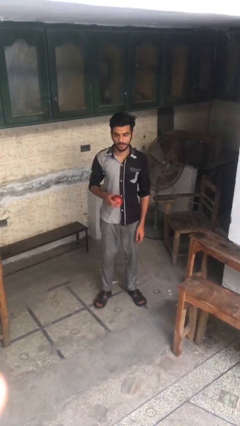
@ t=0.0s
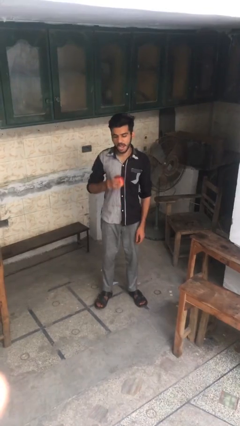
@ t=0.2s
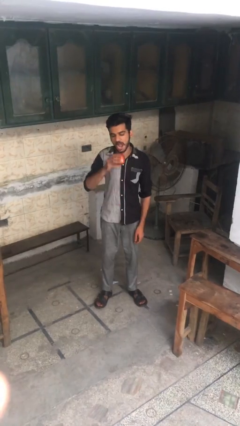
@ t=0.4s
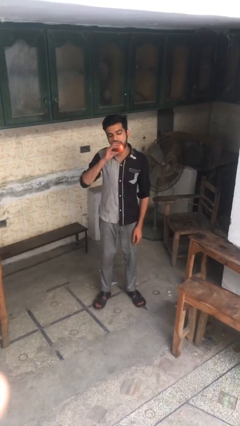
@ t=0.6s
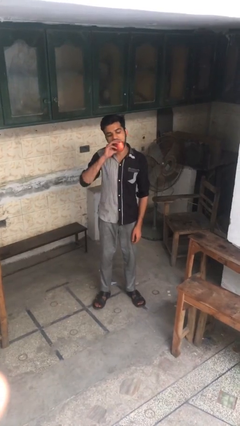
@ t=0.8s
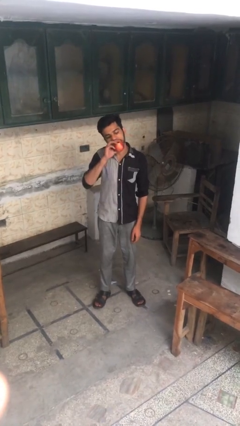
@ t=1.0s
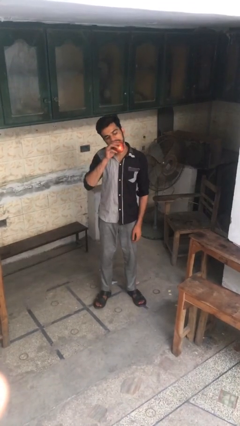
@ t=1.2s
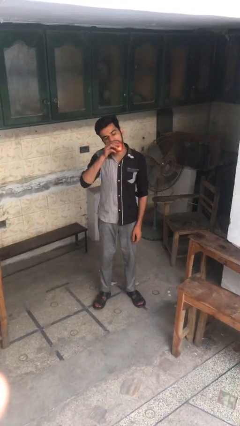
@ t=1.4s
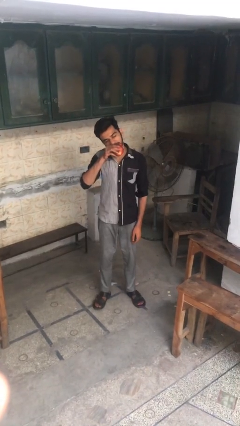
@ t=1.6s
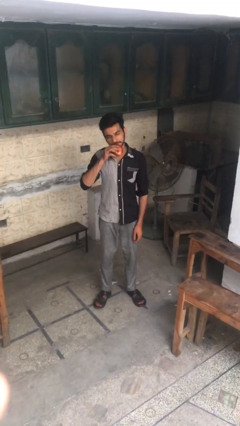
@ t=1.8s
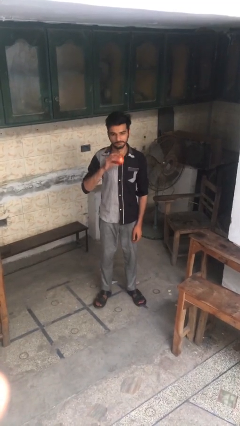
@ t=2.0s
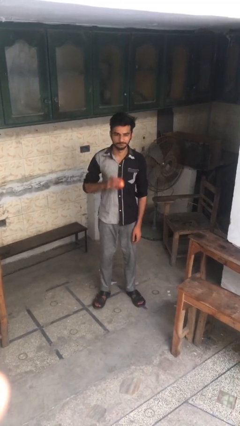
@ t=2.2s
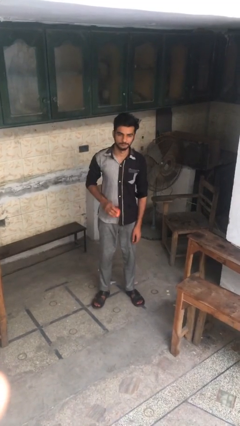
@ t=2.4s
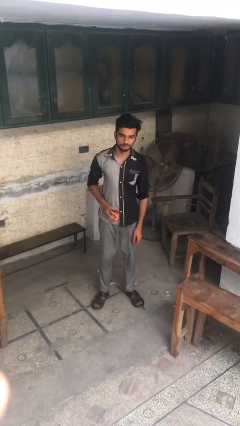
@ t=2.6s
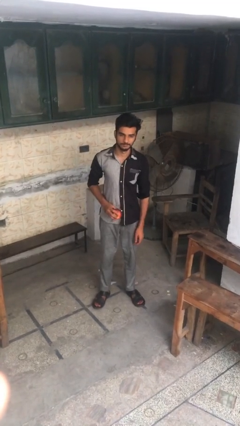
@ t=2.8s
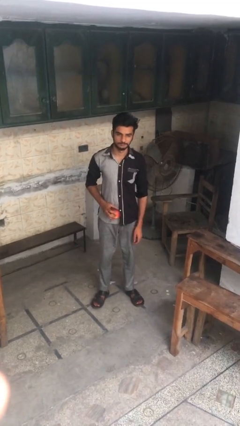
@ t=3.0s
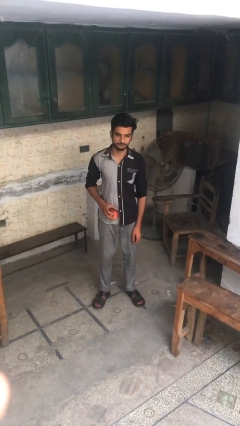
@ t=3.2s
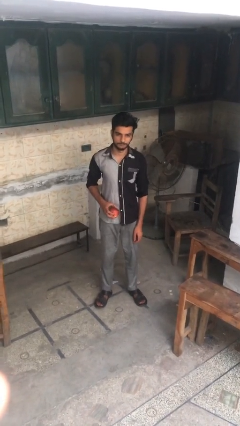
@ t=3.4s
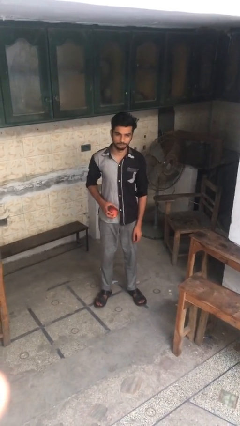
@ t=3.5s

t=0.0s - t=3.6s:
person eats apple

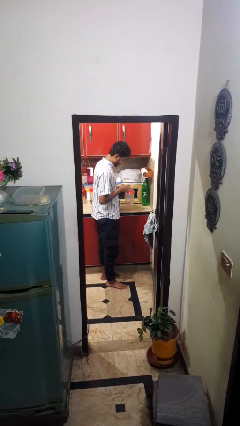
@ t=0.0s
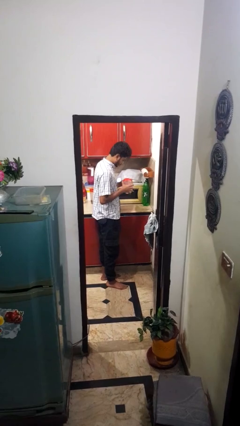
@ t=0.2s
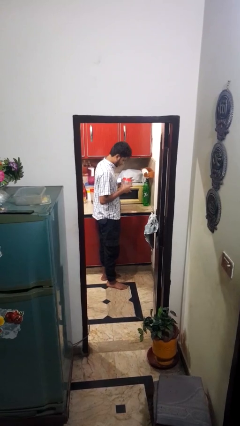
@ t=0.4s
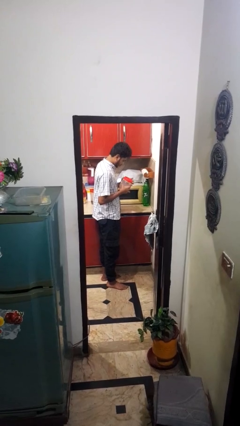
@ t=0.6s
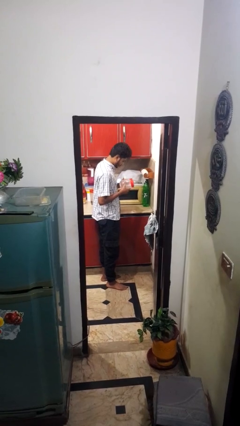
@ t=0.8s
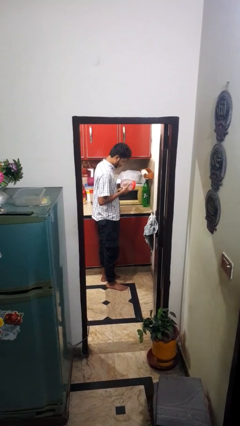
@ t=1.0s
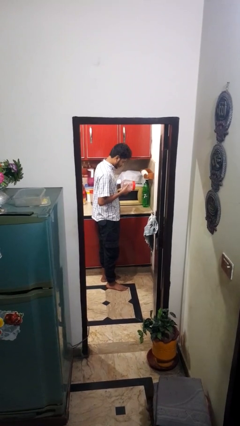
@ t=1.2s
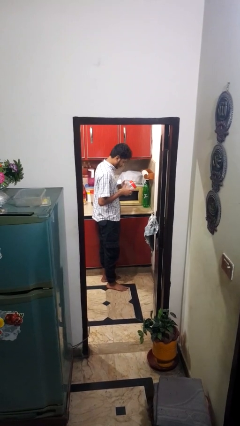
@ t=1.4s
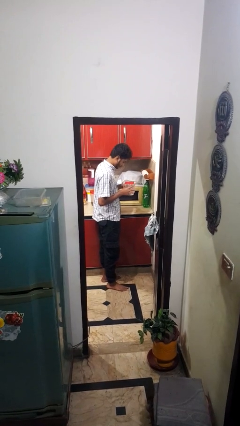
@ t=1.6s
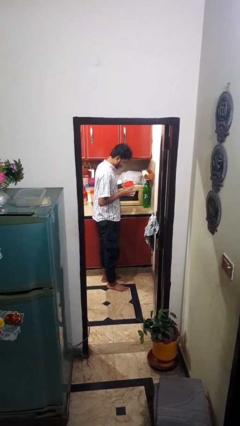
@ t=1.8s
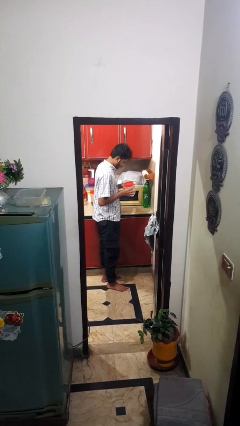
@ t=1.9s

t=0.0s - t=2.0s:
person picks up object from countertop

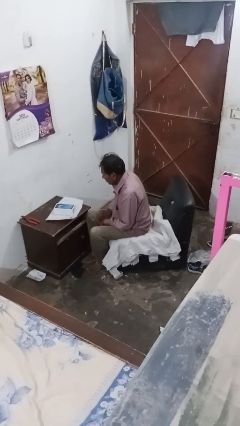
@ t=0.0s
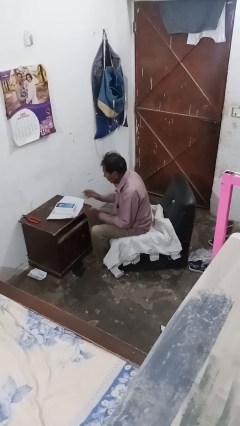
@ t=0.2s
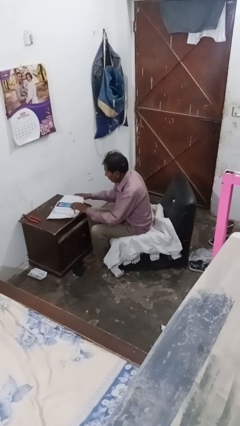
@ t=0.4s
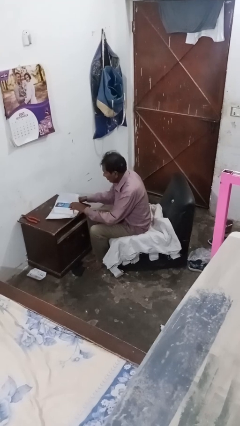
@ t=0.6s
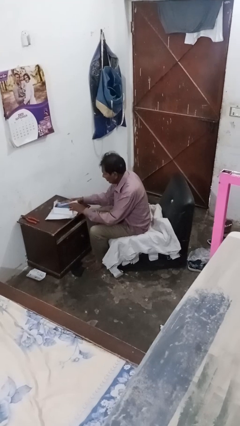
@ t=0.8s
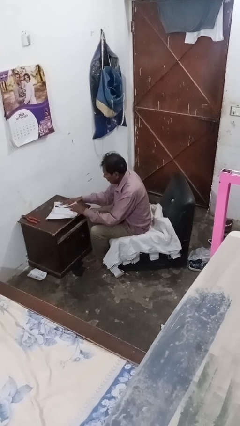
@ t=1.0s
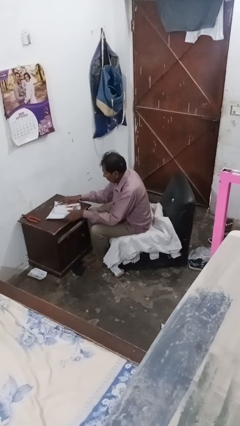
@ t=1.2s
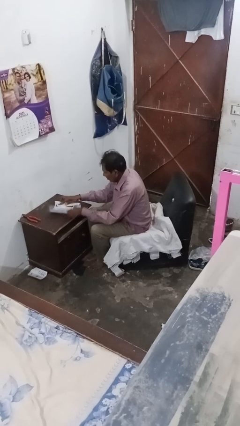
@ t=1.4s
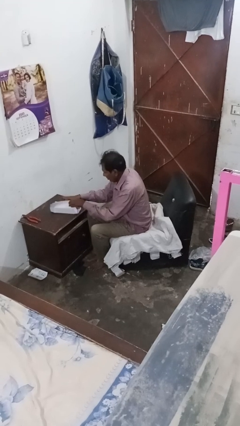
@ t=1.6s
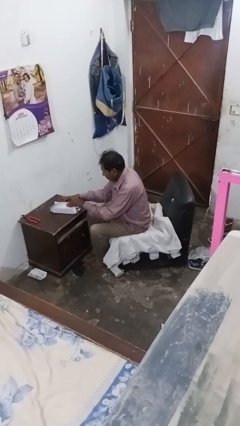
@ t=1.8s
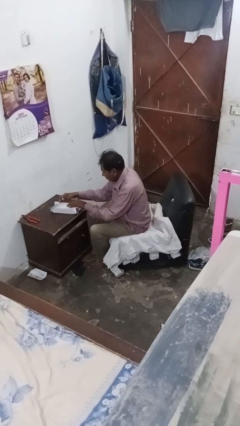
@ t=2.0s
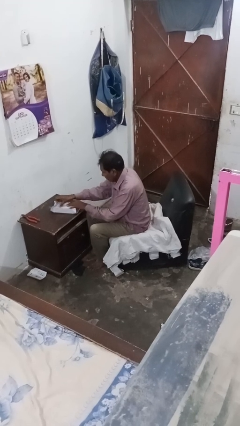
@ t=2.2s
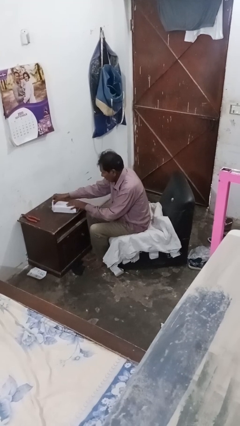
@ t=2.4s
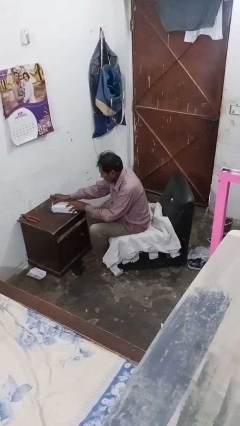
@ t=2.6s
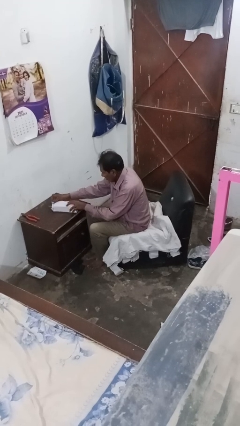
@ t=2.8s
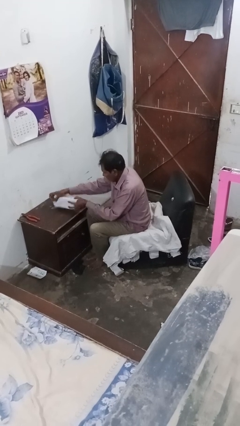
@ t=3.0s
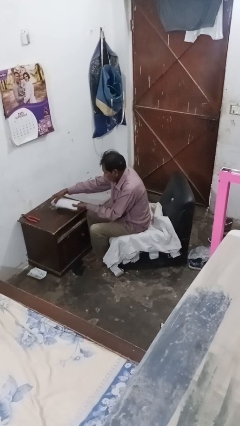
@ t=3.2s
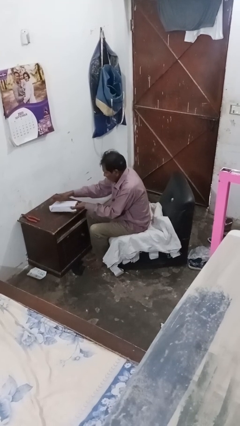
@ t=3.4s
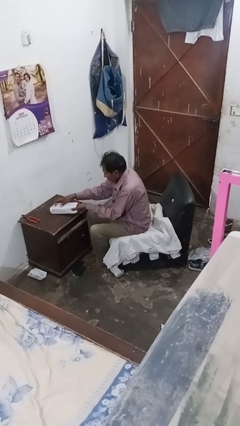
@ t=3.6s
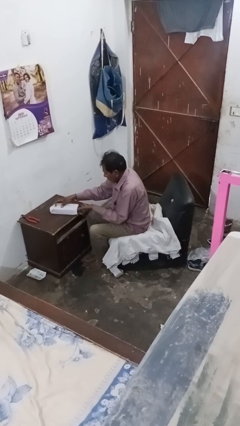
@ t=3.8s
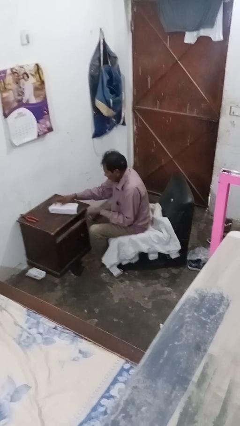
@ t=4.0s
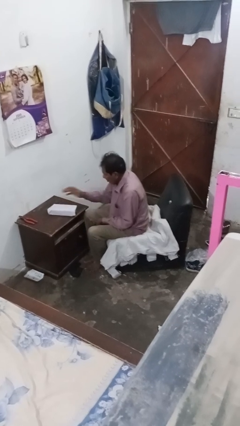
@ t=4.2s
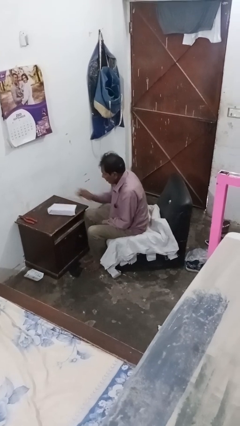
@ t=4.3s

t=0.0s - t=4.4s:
person wraps box

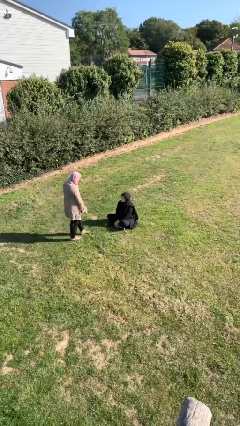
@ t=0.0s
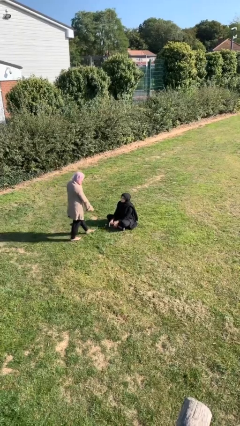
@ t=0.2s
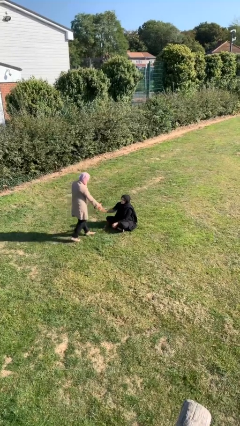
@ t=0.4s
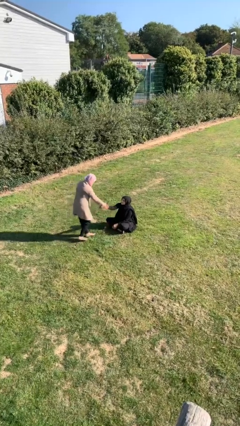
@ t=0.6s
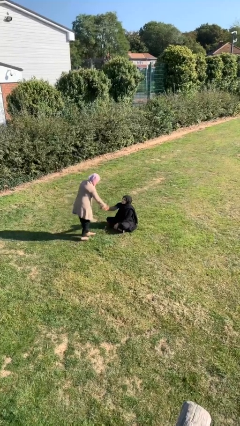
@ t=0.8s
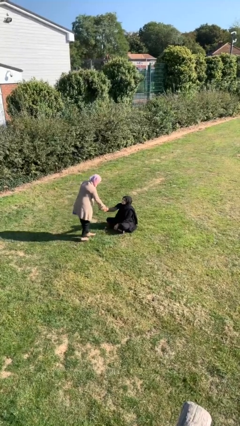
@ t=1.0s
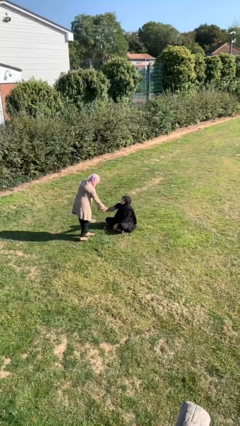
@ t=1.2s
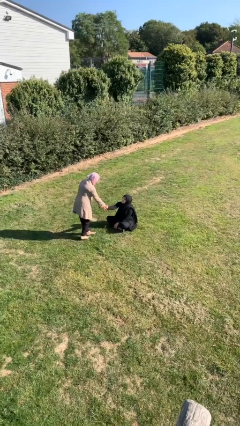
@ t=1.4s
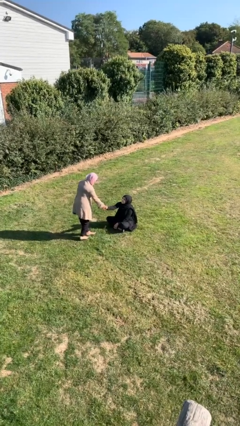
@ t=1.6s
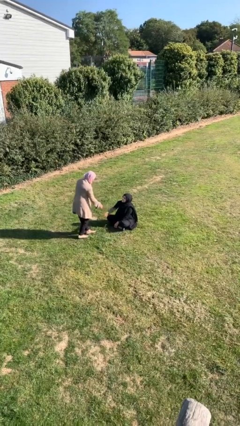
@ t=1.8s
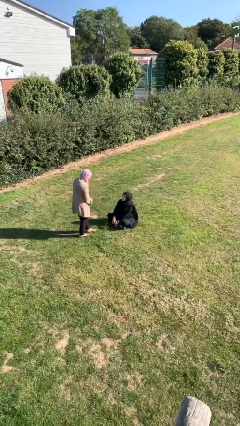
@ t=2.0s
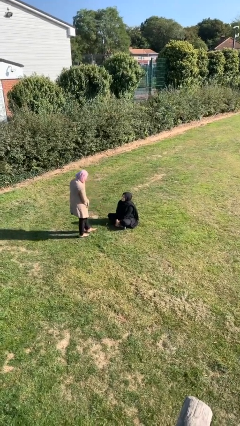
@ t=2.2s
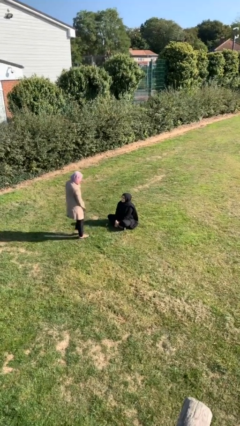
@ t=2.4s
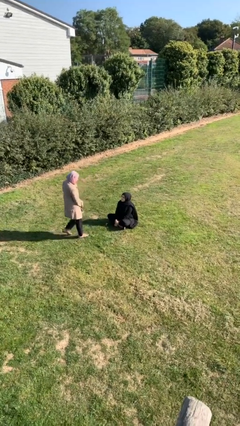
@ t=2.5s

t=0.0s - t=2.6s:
person shakes hand

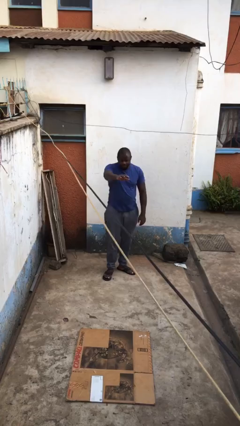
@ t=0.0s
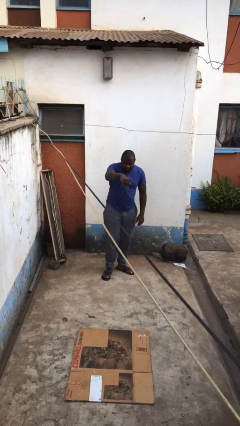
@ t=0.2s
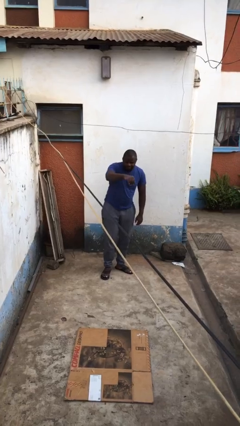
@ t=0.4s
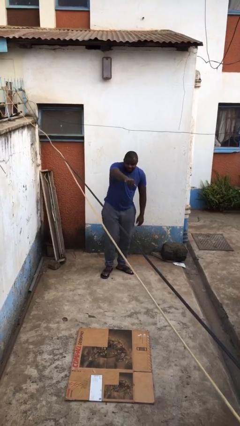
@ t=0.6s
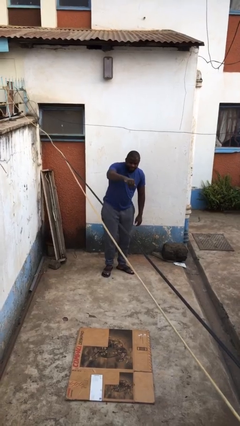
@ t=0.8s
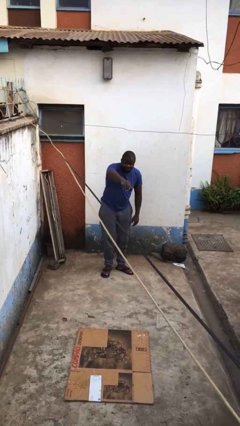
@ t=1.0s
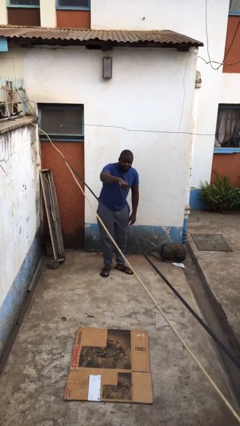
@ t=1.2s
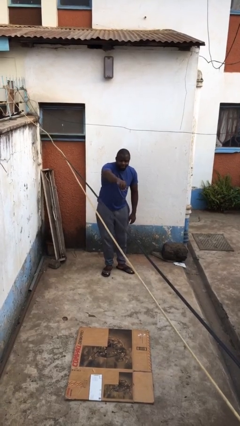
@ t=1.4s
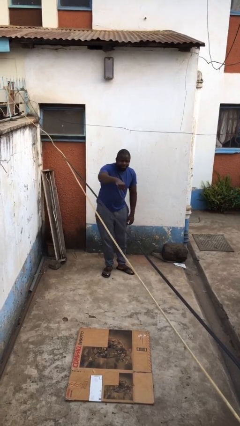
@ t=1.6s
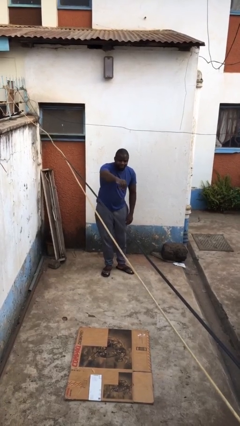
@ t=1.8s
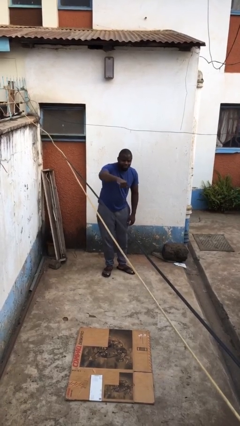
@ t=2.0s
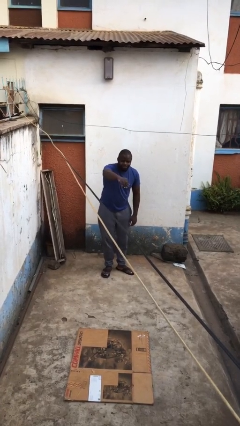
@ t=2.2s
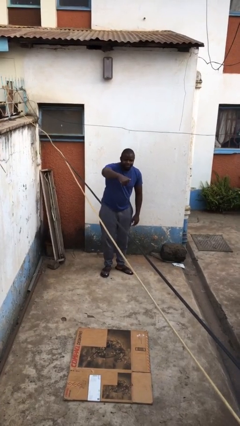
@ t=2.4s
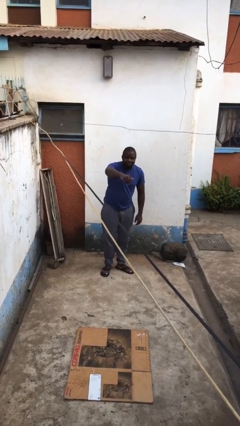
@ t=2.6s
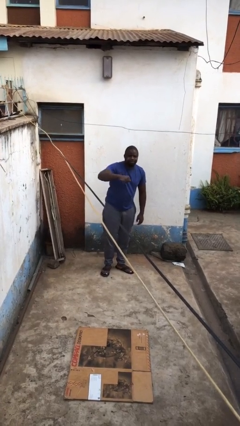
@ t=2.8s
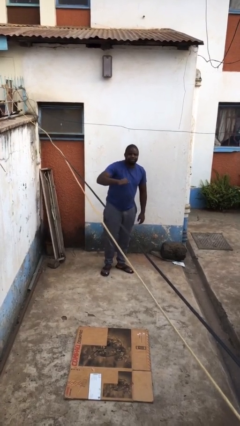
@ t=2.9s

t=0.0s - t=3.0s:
person gestures come here

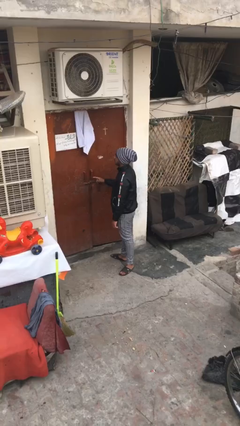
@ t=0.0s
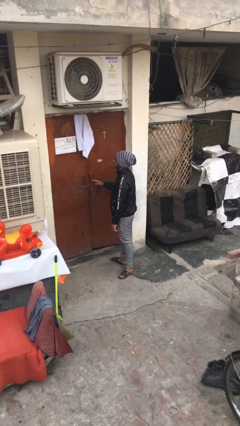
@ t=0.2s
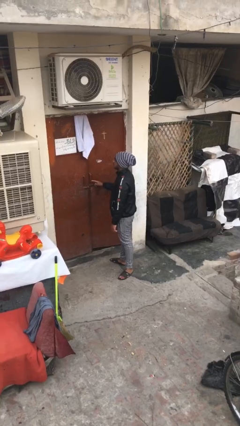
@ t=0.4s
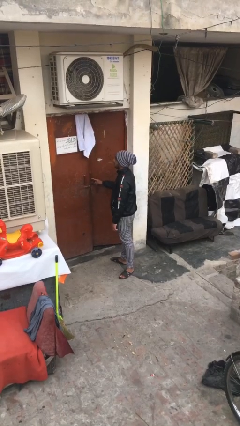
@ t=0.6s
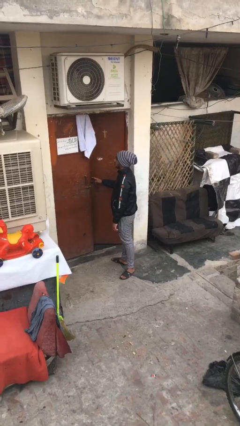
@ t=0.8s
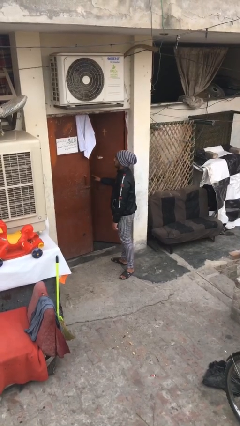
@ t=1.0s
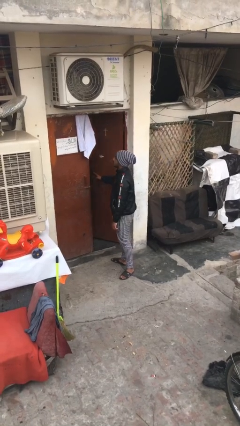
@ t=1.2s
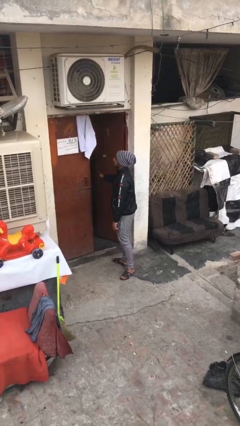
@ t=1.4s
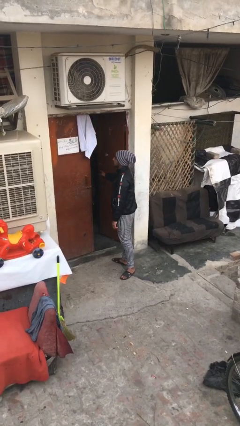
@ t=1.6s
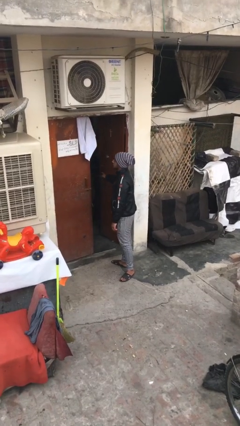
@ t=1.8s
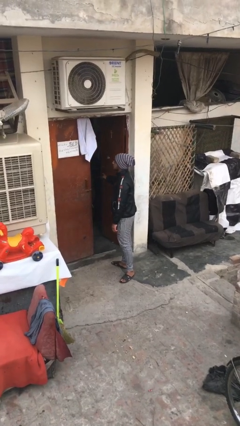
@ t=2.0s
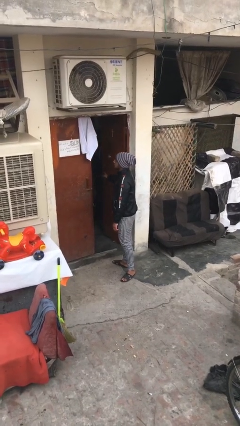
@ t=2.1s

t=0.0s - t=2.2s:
person opens facility door
